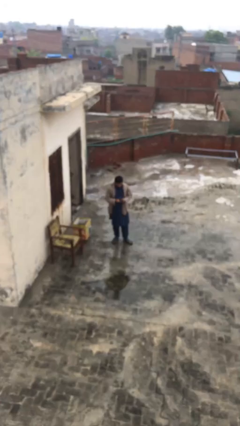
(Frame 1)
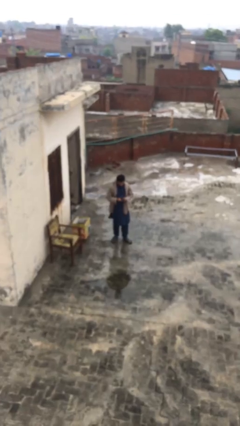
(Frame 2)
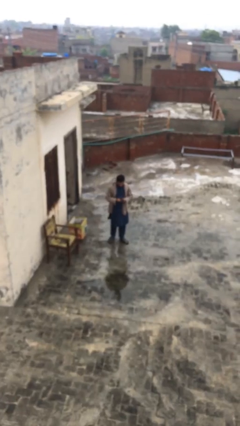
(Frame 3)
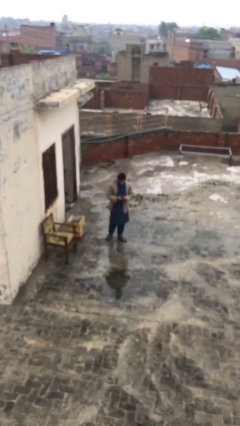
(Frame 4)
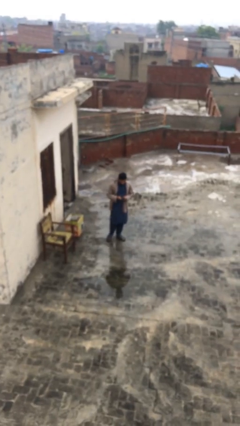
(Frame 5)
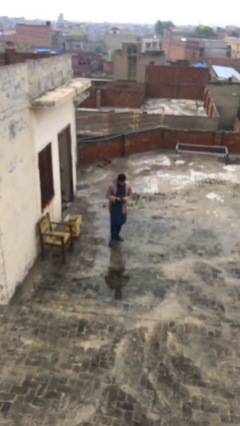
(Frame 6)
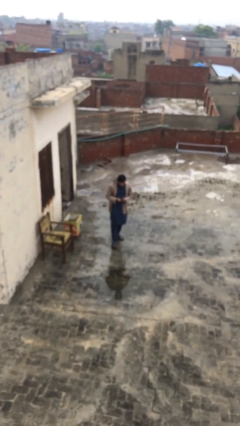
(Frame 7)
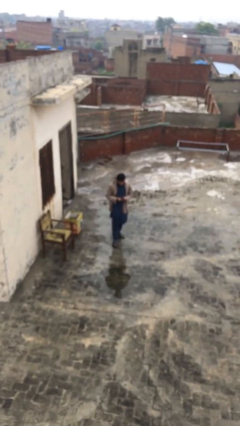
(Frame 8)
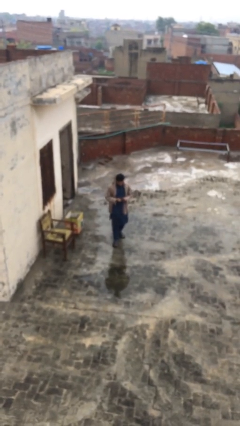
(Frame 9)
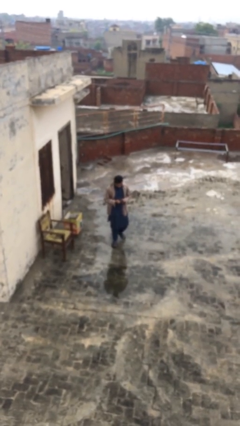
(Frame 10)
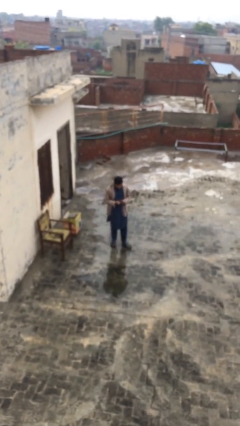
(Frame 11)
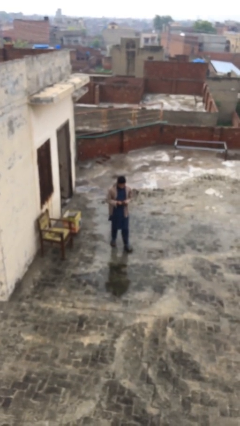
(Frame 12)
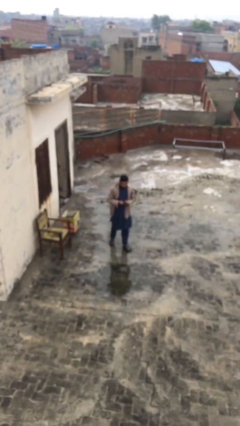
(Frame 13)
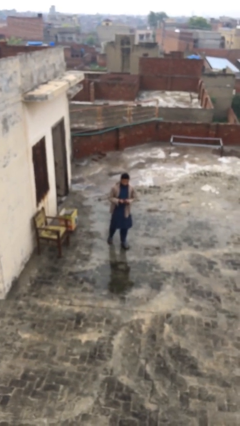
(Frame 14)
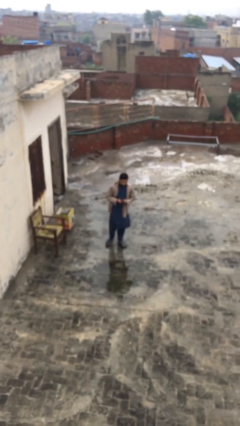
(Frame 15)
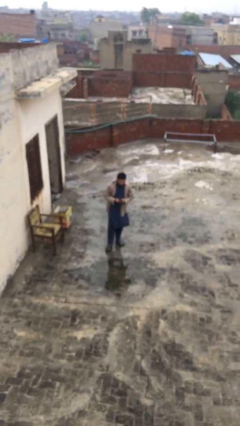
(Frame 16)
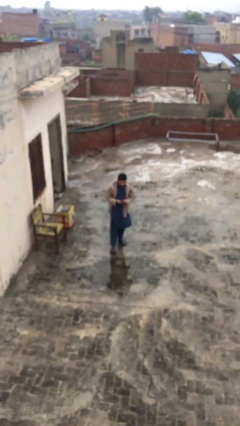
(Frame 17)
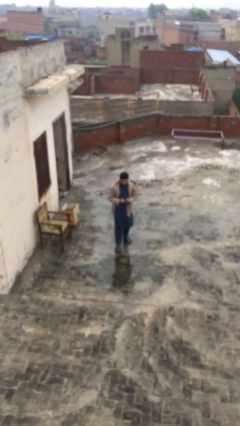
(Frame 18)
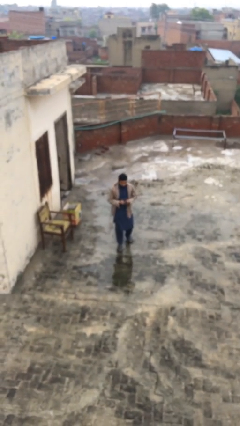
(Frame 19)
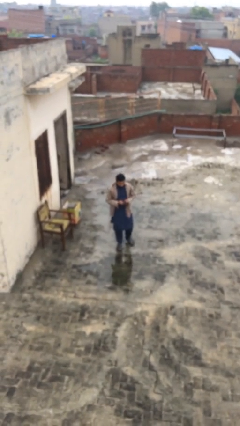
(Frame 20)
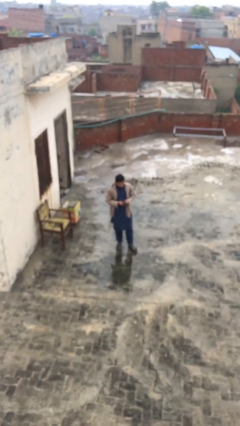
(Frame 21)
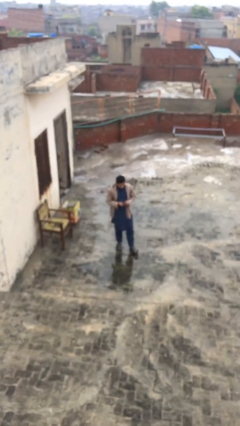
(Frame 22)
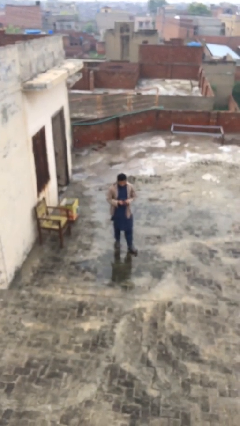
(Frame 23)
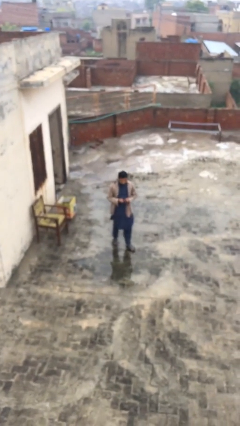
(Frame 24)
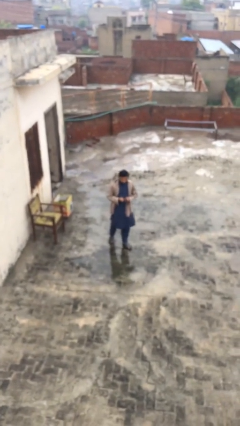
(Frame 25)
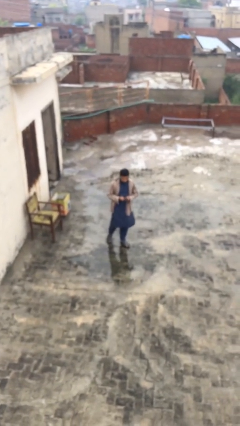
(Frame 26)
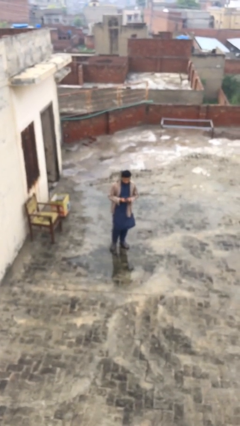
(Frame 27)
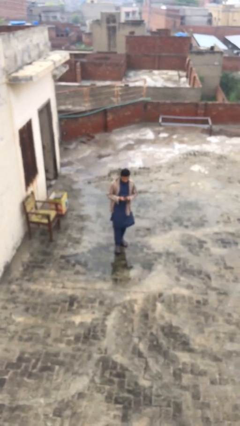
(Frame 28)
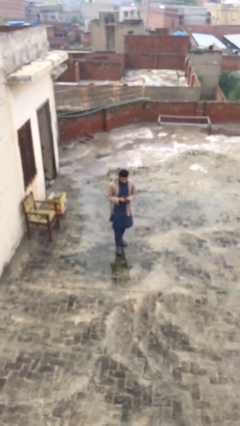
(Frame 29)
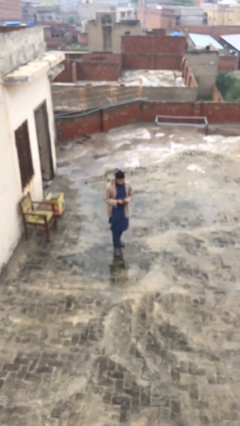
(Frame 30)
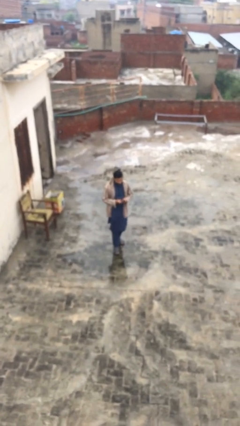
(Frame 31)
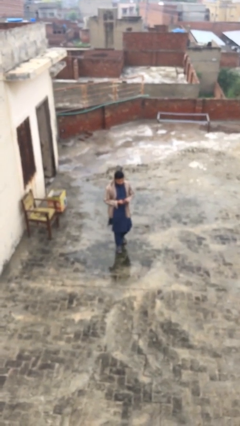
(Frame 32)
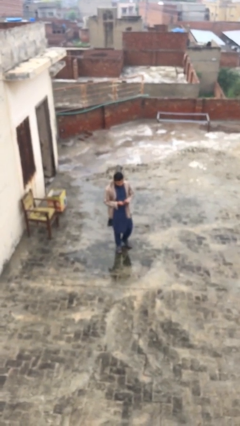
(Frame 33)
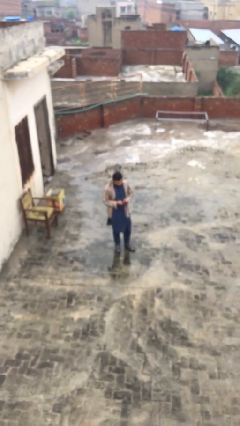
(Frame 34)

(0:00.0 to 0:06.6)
person texts on phone

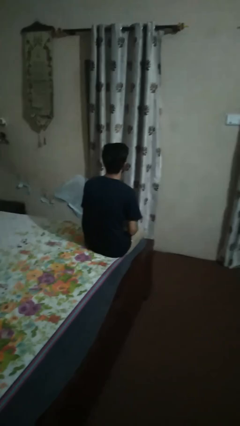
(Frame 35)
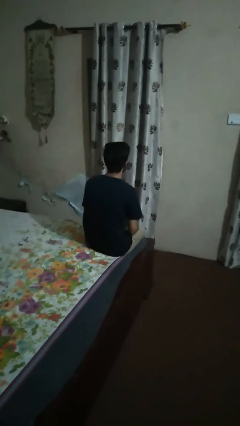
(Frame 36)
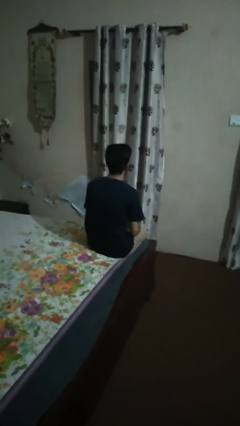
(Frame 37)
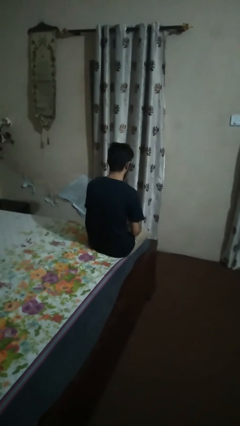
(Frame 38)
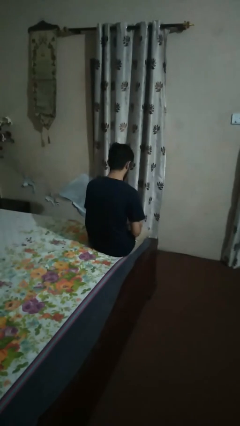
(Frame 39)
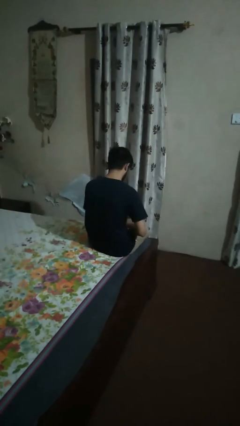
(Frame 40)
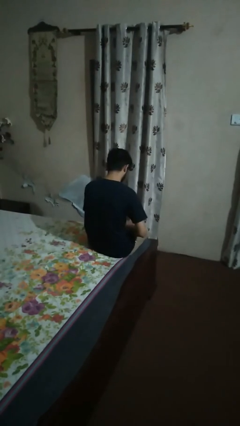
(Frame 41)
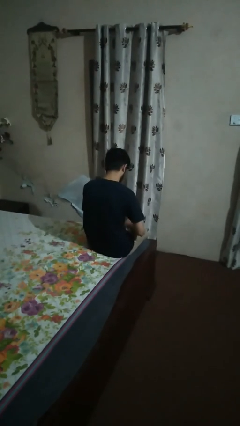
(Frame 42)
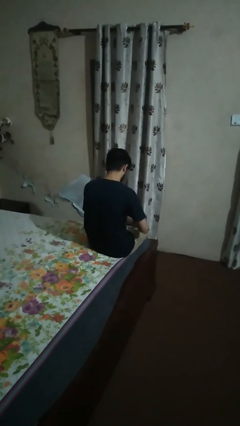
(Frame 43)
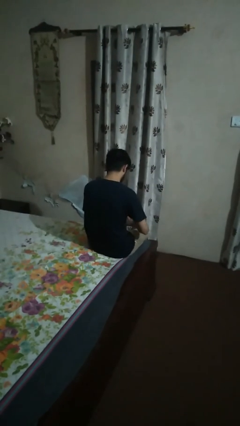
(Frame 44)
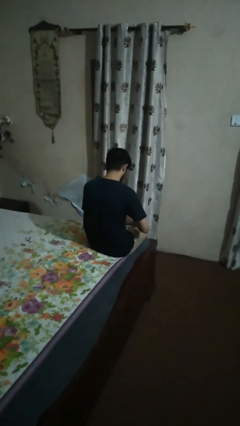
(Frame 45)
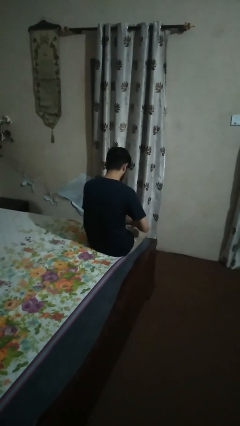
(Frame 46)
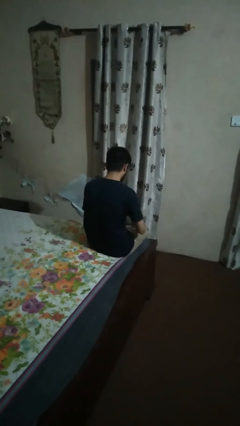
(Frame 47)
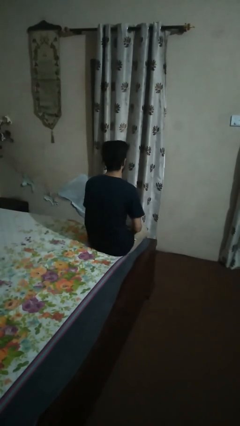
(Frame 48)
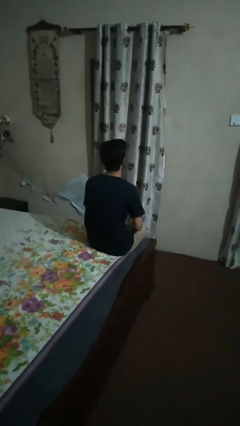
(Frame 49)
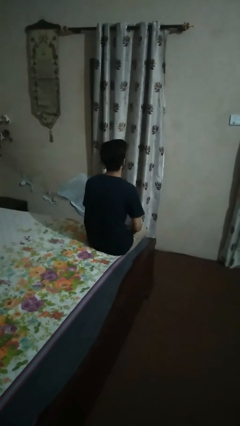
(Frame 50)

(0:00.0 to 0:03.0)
person interacts with tablet

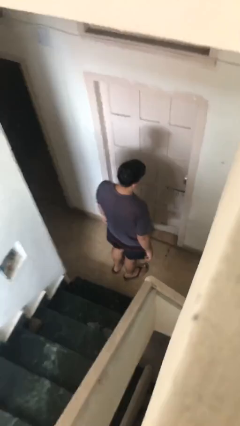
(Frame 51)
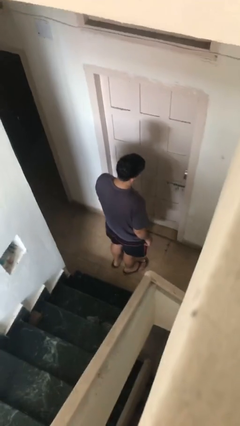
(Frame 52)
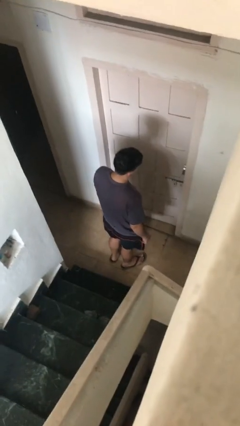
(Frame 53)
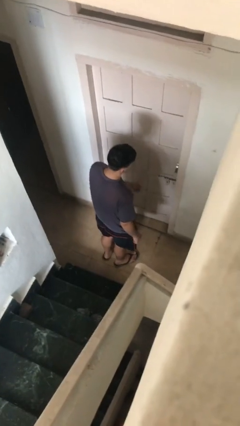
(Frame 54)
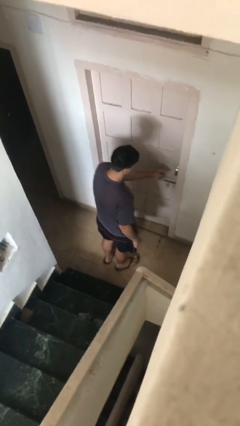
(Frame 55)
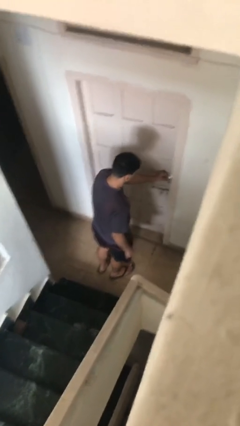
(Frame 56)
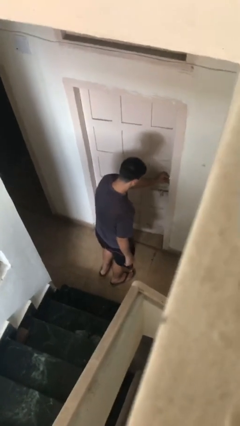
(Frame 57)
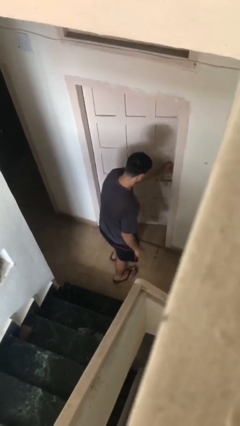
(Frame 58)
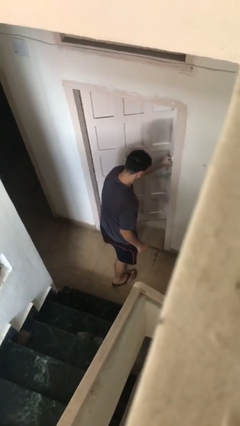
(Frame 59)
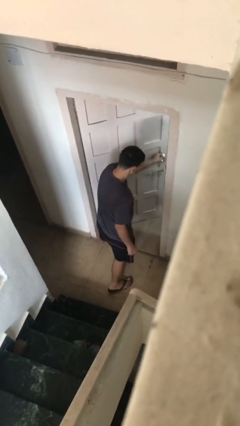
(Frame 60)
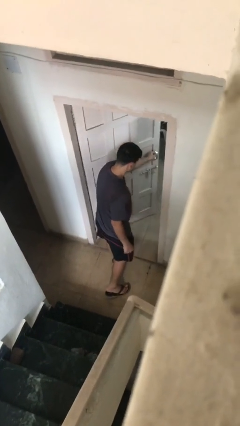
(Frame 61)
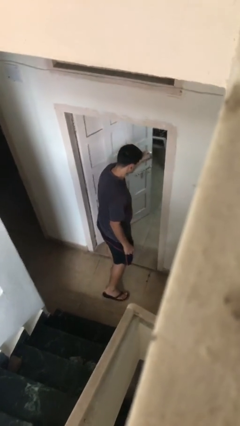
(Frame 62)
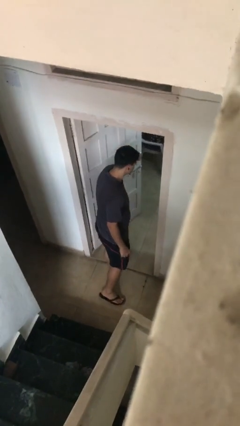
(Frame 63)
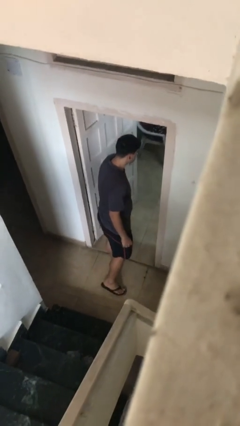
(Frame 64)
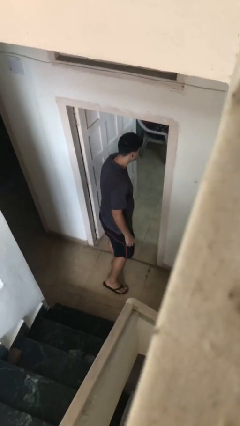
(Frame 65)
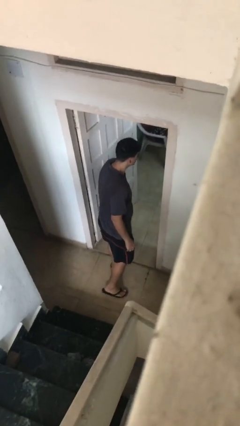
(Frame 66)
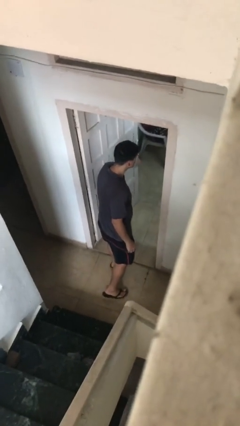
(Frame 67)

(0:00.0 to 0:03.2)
person opens facility door

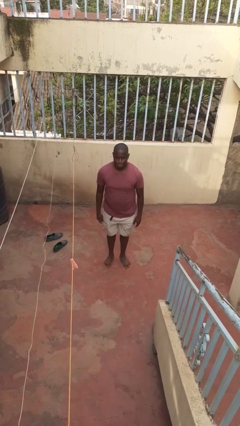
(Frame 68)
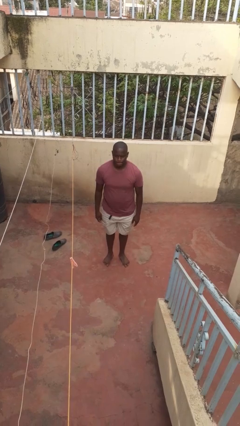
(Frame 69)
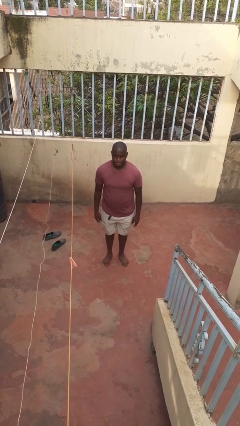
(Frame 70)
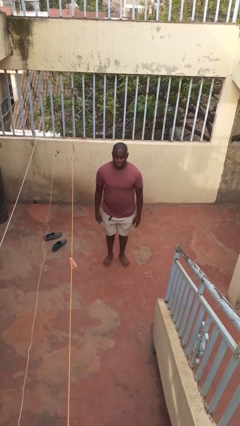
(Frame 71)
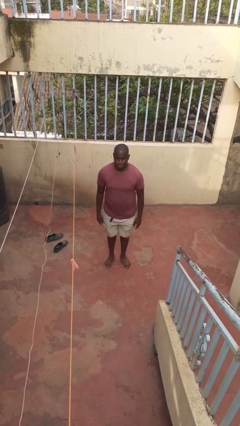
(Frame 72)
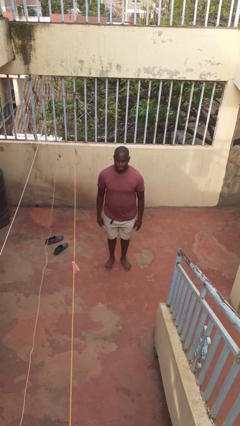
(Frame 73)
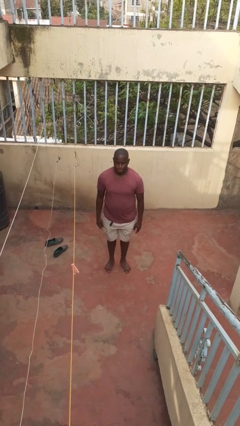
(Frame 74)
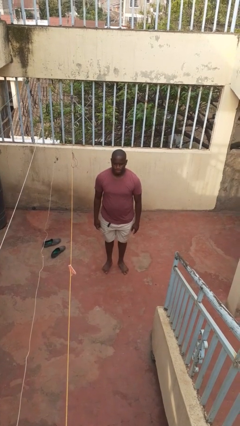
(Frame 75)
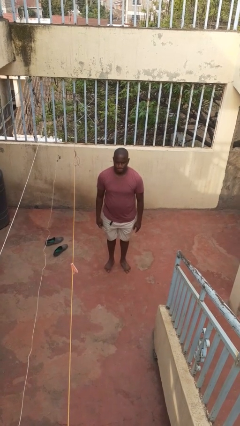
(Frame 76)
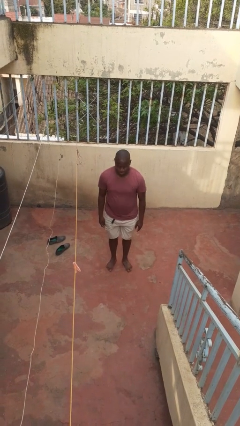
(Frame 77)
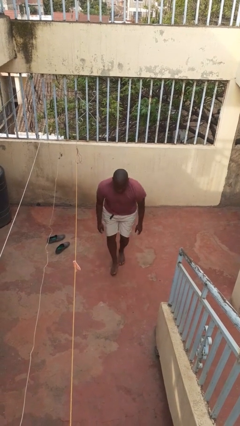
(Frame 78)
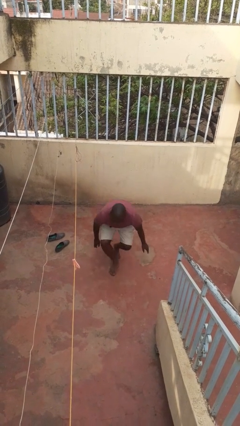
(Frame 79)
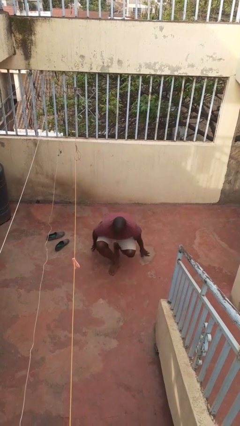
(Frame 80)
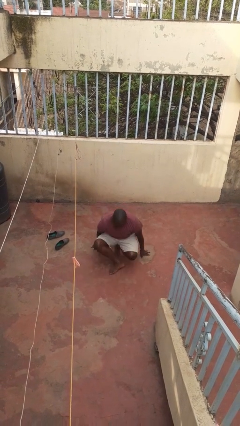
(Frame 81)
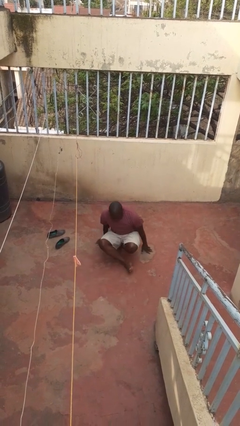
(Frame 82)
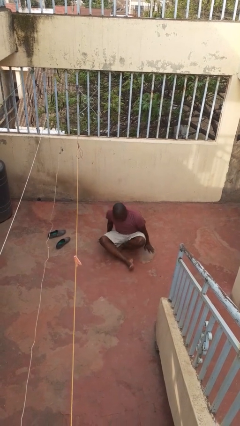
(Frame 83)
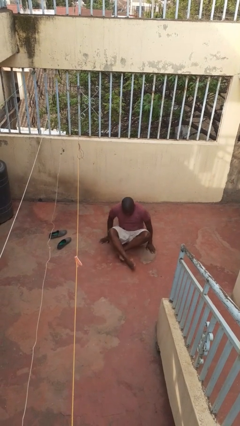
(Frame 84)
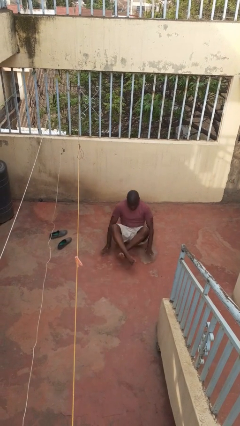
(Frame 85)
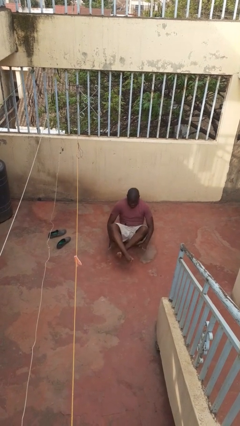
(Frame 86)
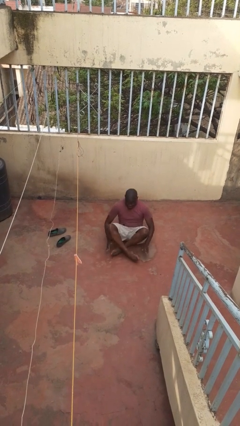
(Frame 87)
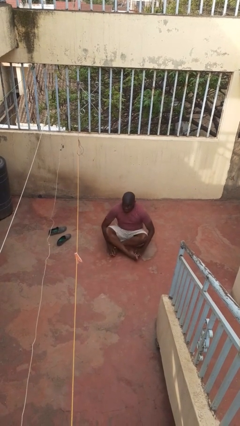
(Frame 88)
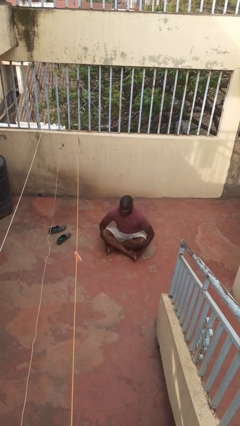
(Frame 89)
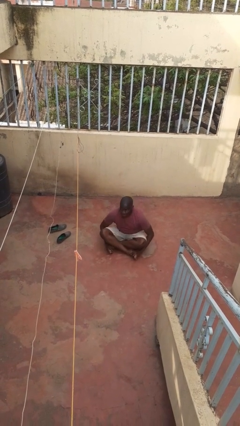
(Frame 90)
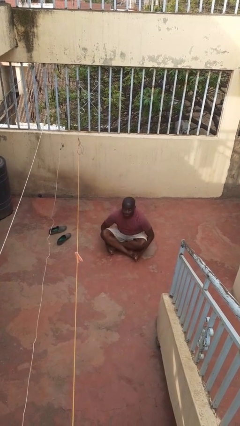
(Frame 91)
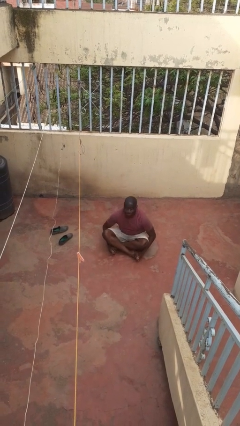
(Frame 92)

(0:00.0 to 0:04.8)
person sits crisscross

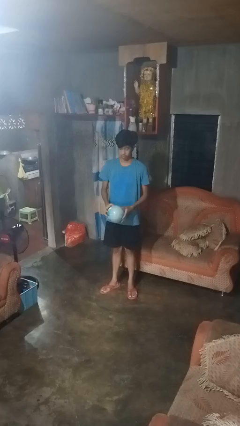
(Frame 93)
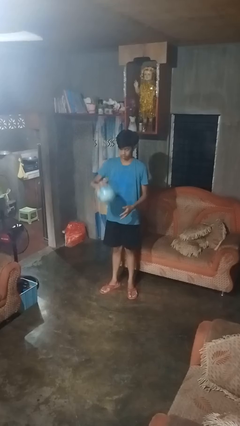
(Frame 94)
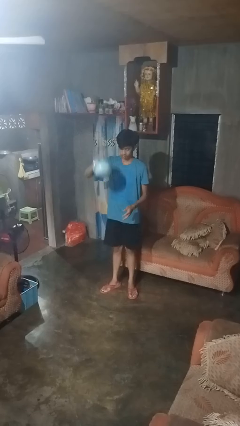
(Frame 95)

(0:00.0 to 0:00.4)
person bounces ball on floor
